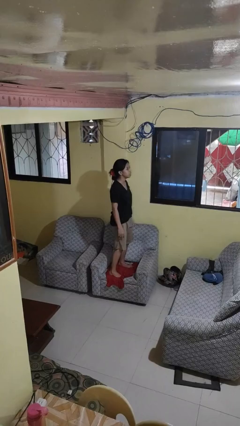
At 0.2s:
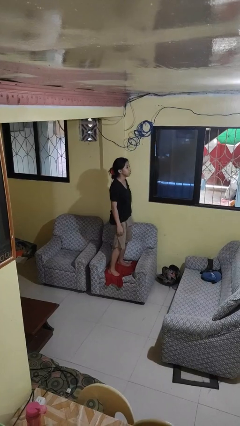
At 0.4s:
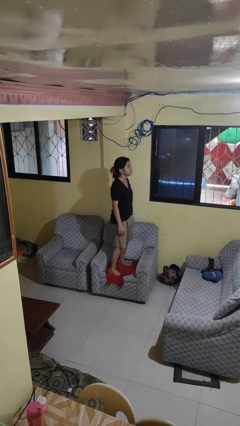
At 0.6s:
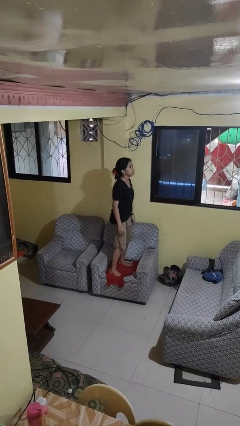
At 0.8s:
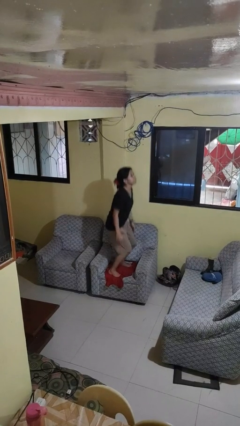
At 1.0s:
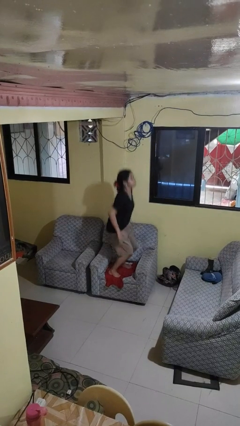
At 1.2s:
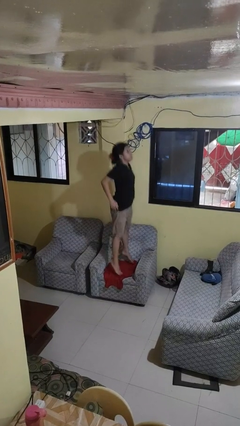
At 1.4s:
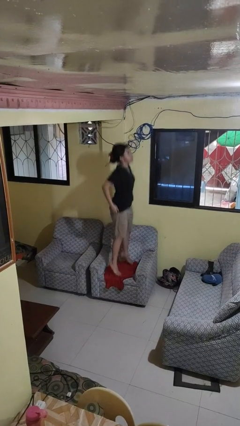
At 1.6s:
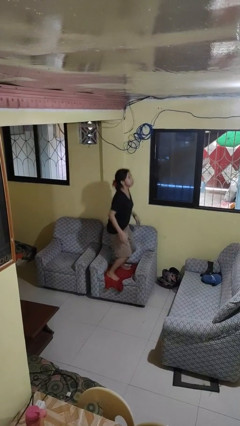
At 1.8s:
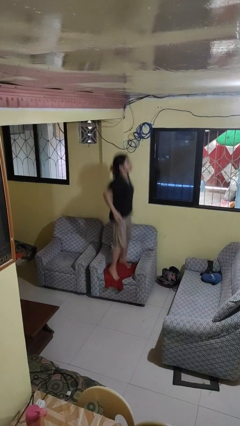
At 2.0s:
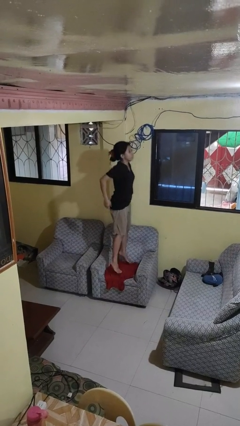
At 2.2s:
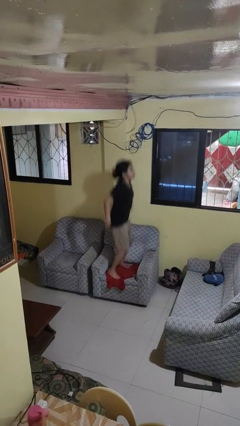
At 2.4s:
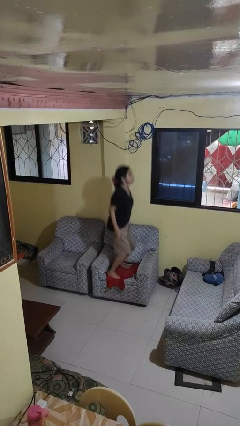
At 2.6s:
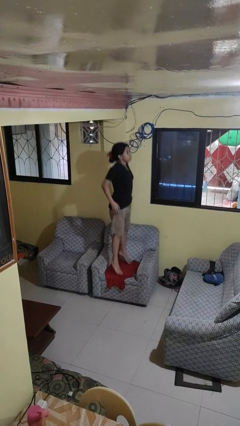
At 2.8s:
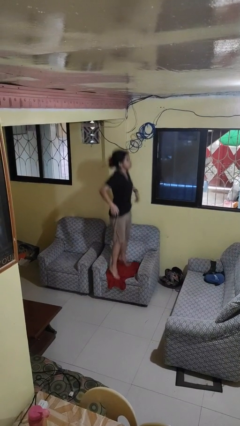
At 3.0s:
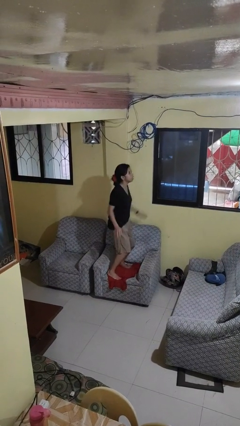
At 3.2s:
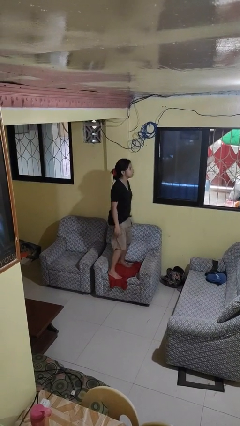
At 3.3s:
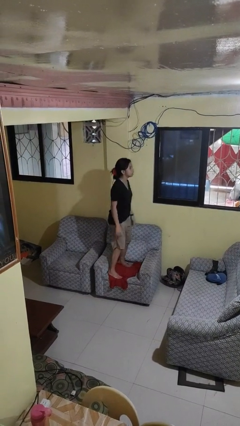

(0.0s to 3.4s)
person jumps on couch

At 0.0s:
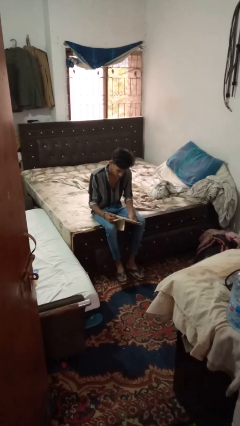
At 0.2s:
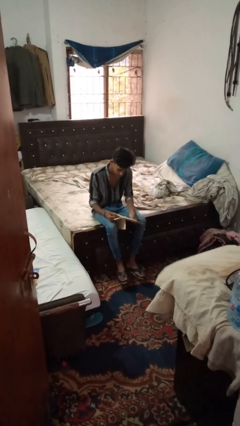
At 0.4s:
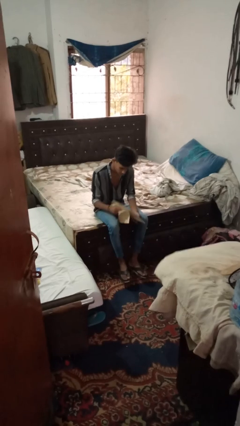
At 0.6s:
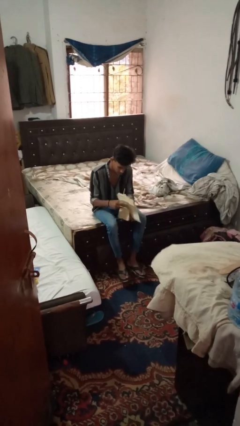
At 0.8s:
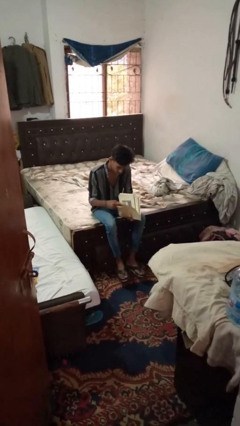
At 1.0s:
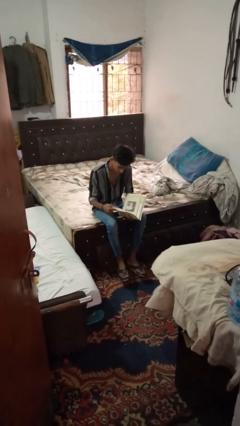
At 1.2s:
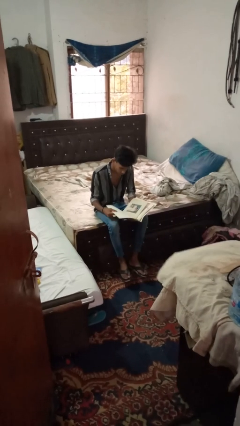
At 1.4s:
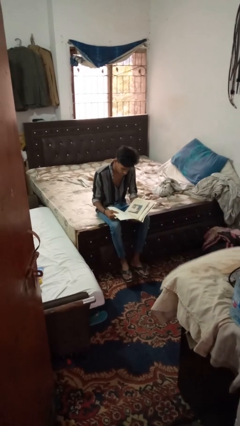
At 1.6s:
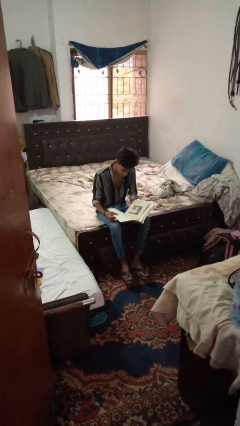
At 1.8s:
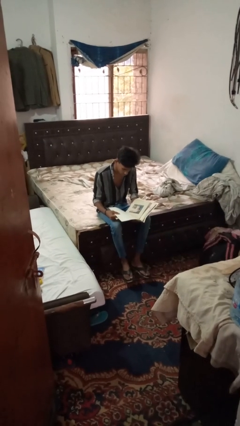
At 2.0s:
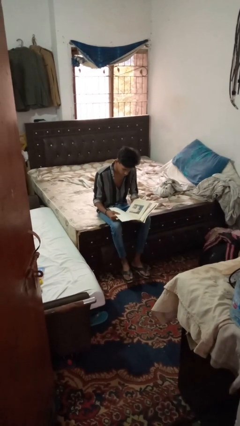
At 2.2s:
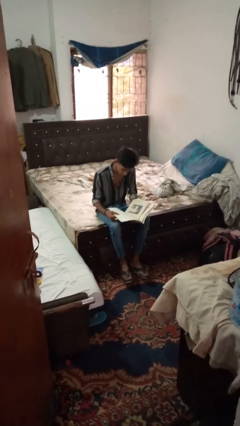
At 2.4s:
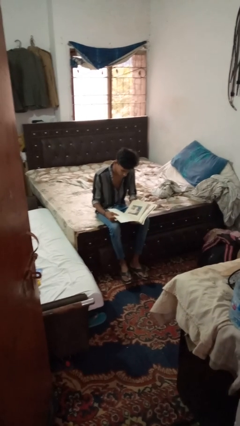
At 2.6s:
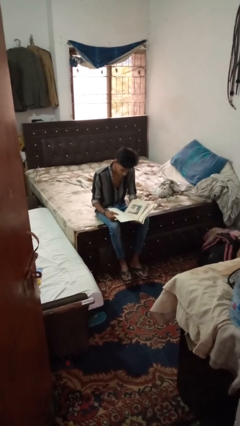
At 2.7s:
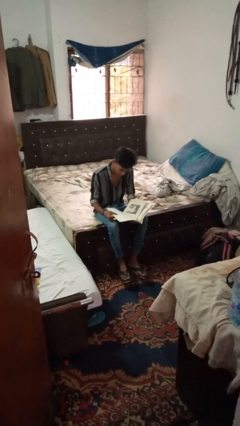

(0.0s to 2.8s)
person reads magazine

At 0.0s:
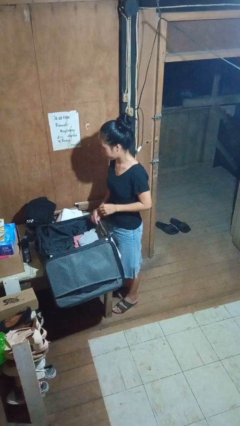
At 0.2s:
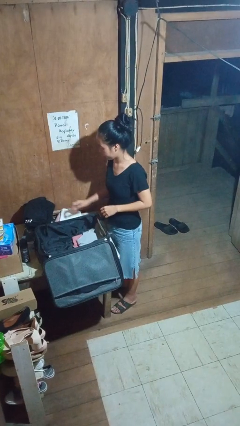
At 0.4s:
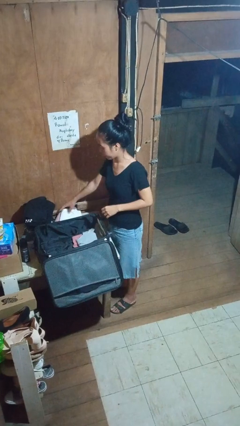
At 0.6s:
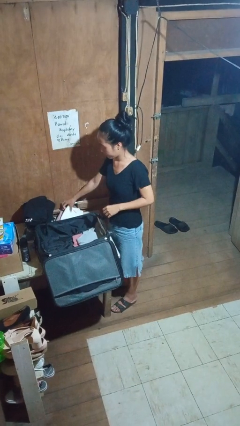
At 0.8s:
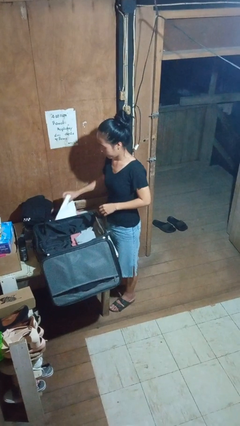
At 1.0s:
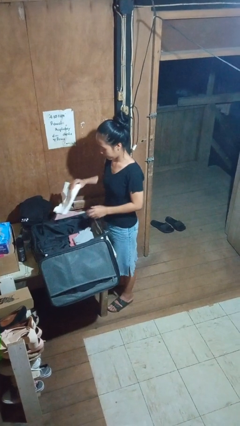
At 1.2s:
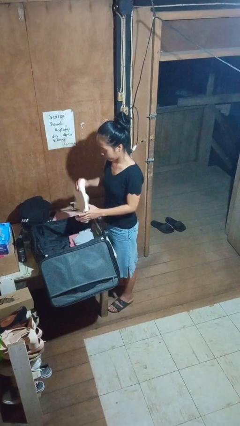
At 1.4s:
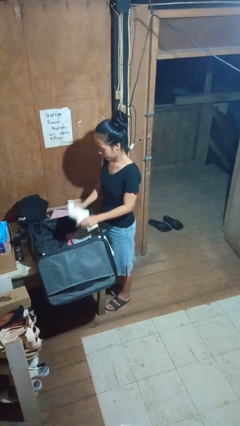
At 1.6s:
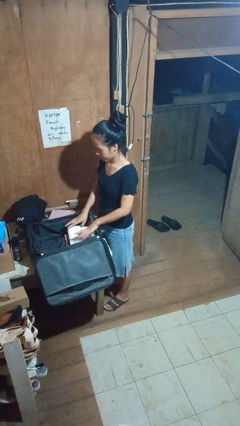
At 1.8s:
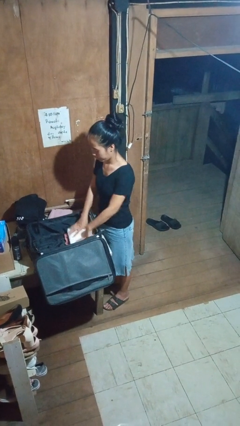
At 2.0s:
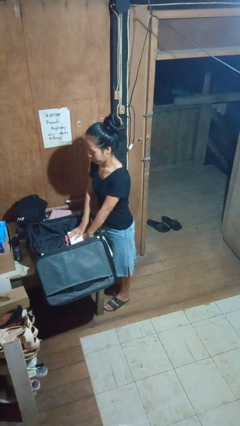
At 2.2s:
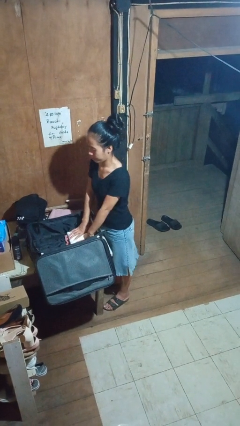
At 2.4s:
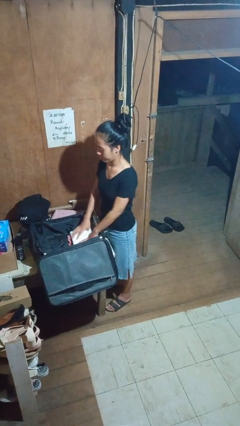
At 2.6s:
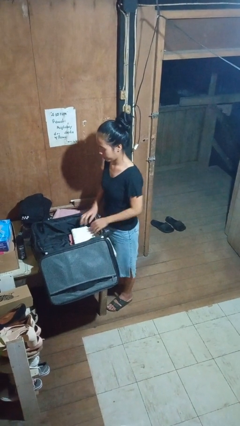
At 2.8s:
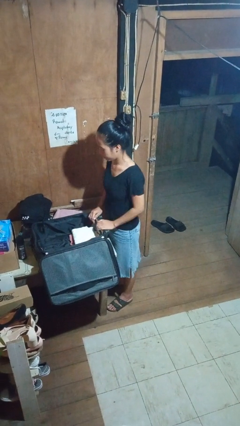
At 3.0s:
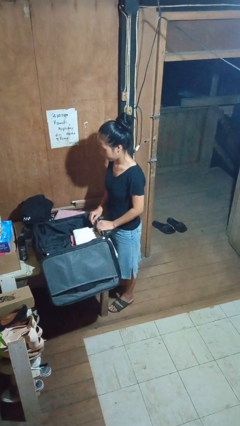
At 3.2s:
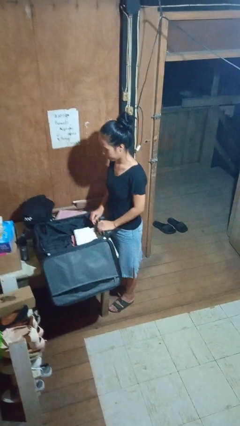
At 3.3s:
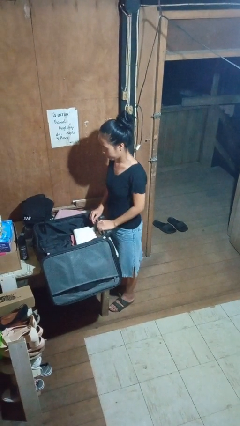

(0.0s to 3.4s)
person loads clothes into suitcase

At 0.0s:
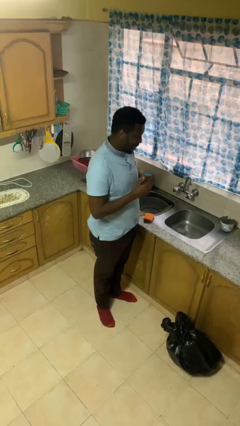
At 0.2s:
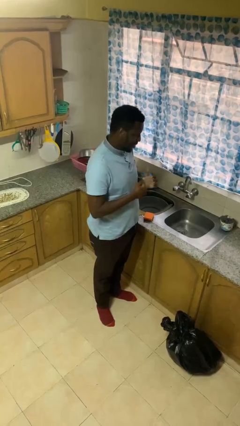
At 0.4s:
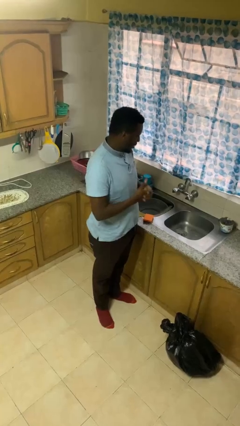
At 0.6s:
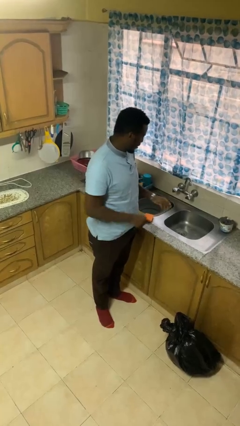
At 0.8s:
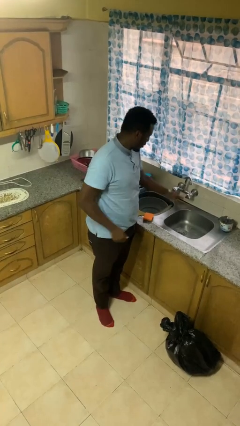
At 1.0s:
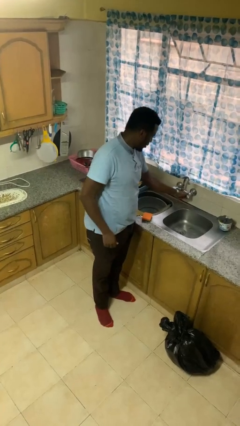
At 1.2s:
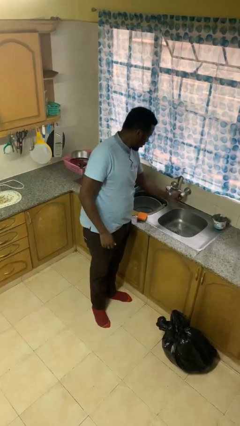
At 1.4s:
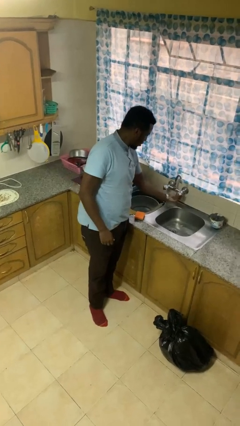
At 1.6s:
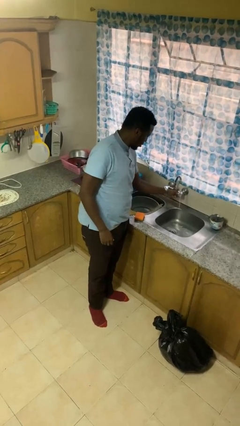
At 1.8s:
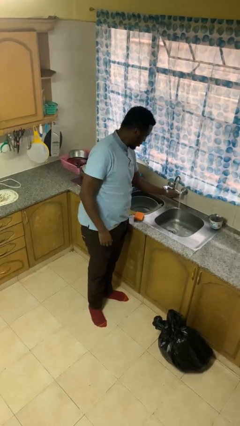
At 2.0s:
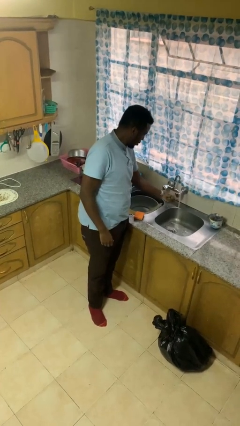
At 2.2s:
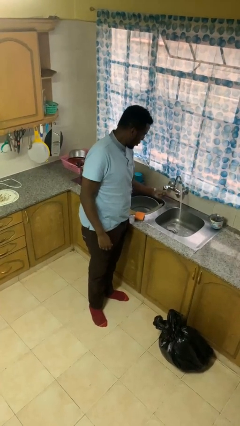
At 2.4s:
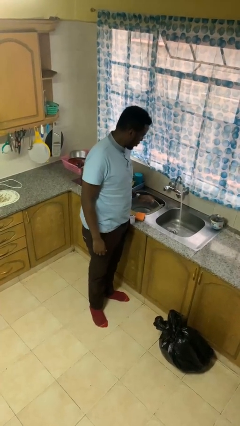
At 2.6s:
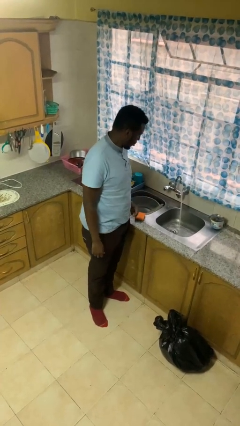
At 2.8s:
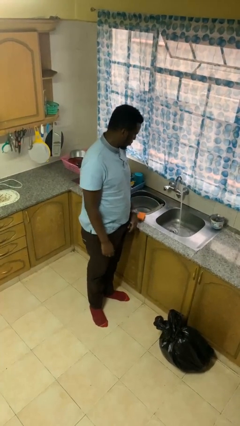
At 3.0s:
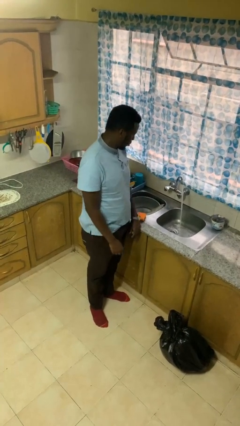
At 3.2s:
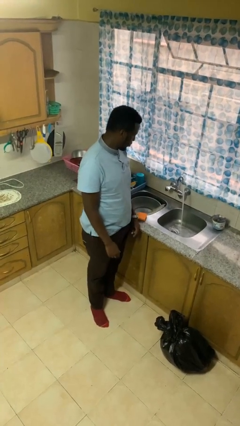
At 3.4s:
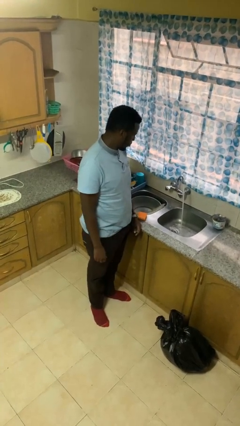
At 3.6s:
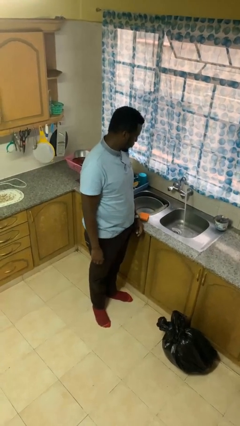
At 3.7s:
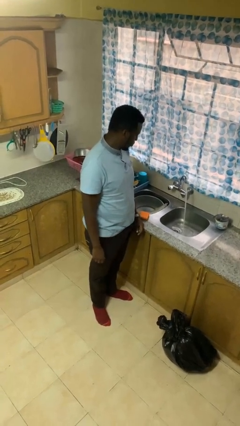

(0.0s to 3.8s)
person turns on faucet

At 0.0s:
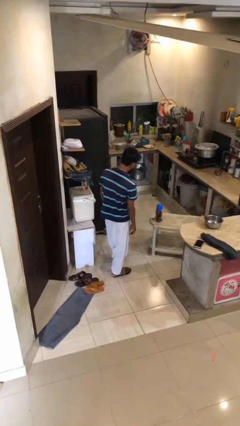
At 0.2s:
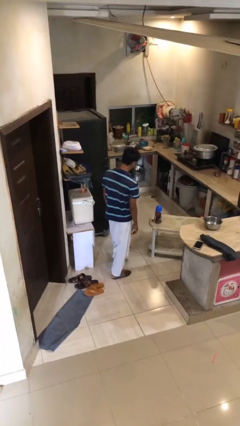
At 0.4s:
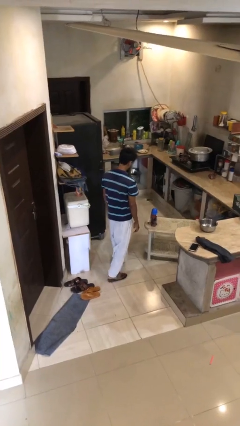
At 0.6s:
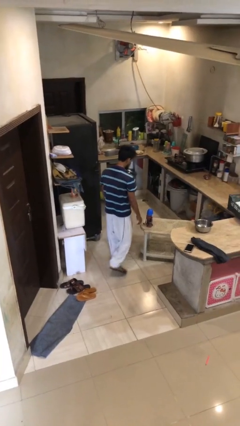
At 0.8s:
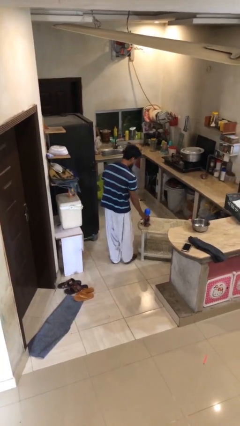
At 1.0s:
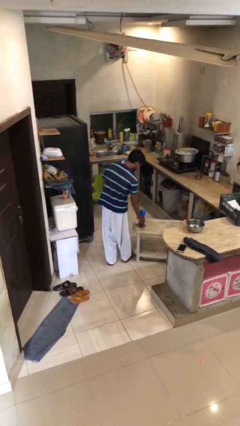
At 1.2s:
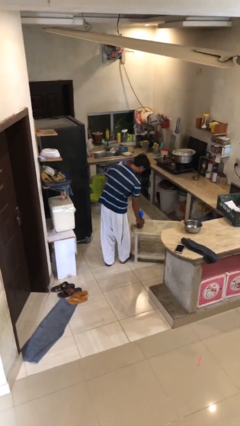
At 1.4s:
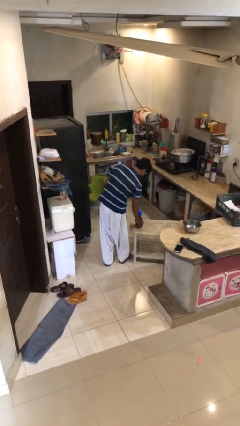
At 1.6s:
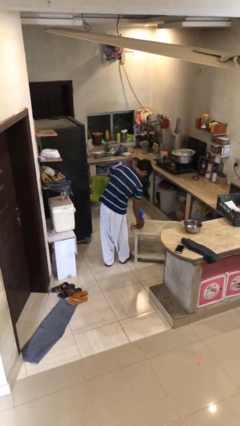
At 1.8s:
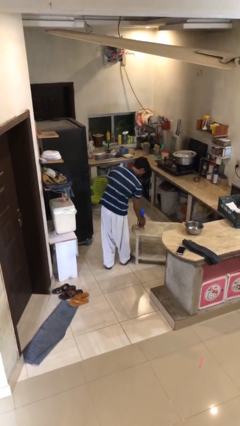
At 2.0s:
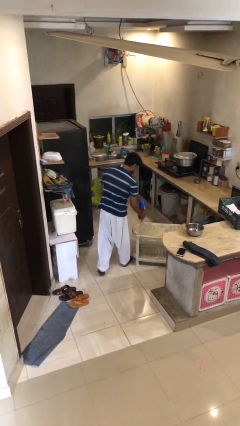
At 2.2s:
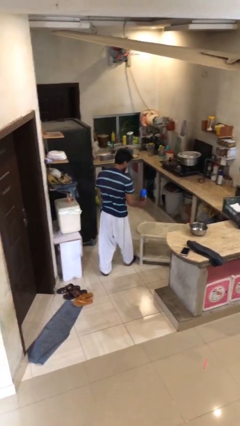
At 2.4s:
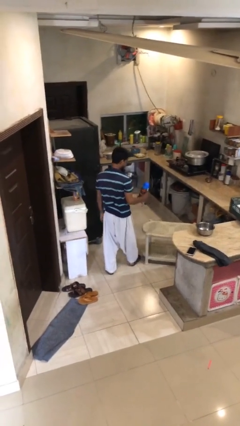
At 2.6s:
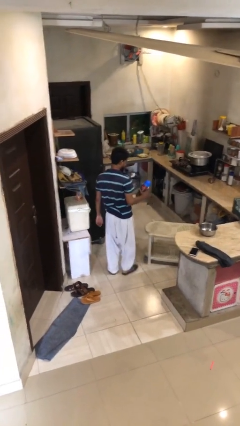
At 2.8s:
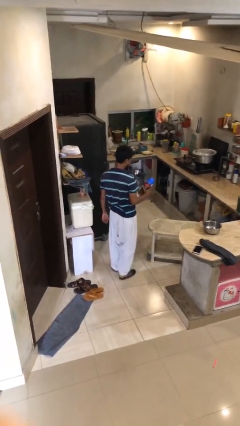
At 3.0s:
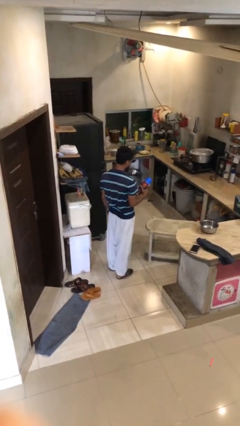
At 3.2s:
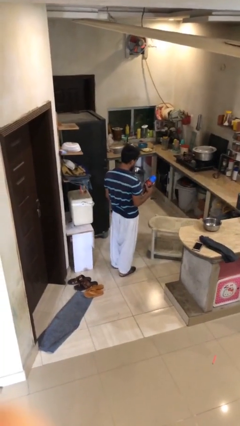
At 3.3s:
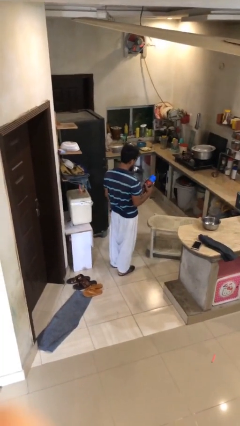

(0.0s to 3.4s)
person picks up object from table

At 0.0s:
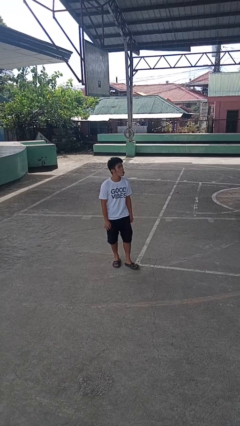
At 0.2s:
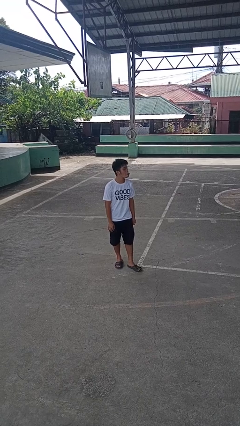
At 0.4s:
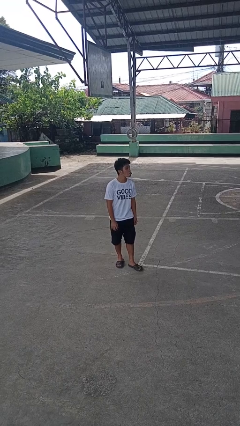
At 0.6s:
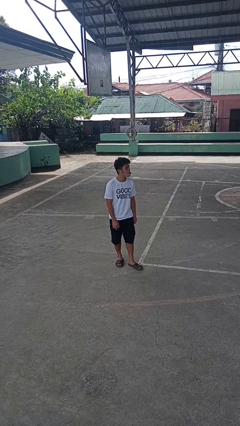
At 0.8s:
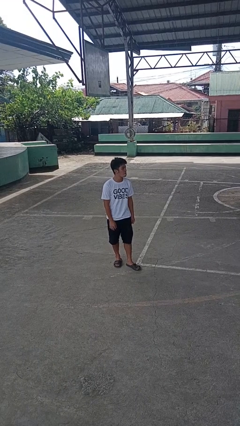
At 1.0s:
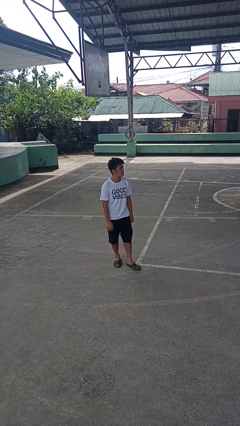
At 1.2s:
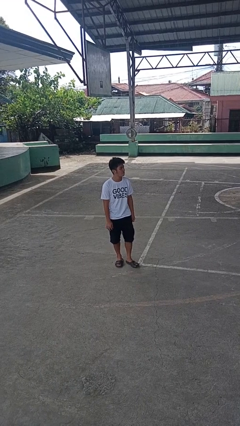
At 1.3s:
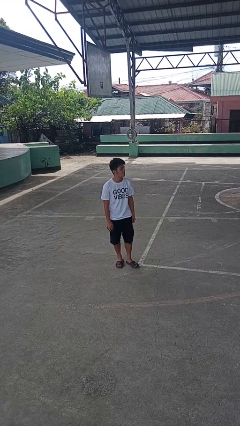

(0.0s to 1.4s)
person sticks out tongue
